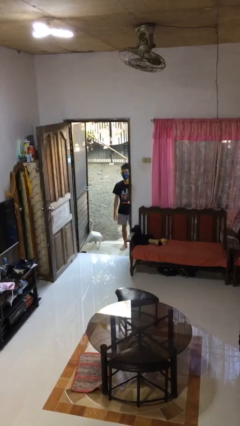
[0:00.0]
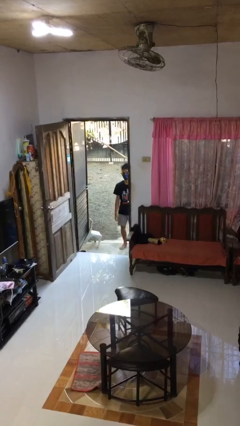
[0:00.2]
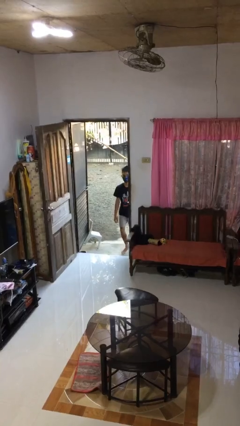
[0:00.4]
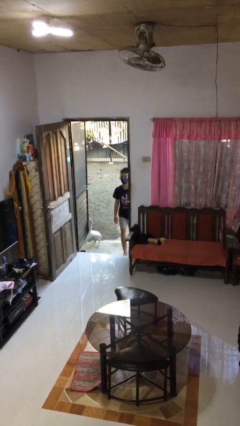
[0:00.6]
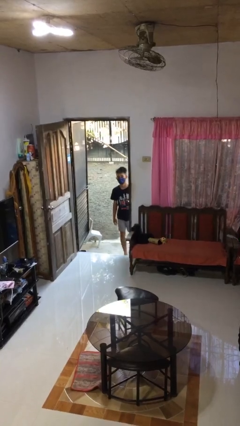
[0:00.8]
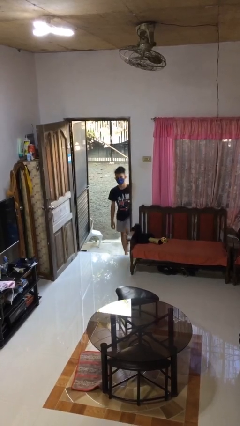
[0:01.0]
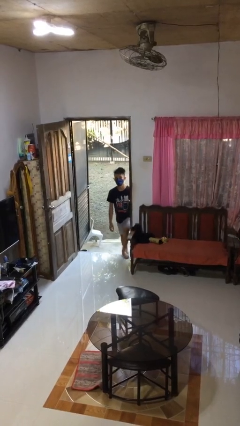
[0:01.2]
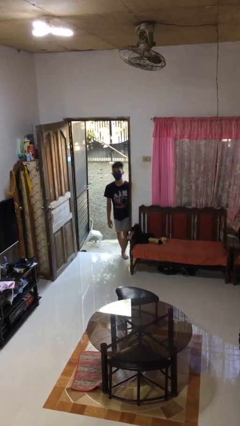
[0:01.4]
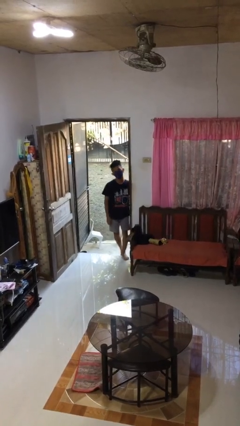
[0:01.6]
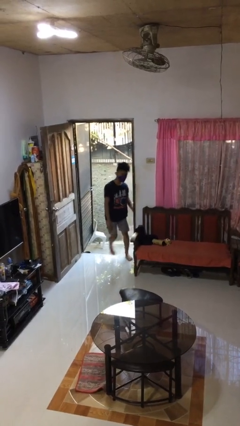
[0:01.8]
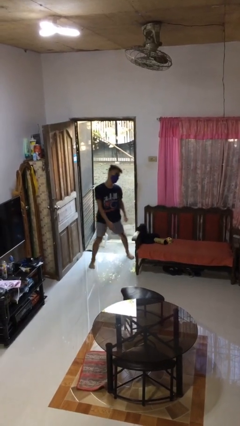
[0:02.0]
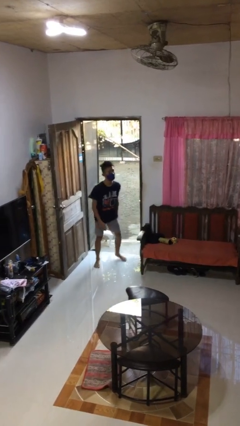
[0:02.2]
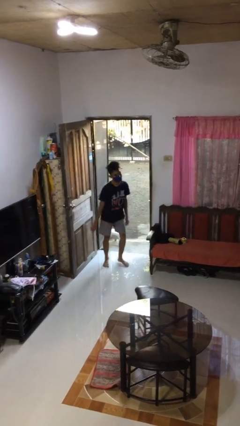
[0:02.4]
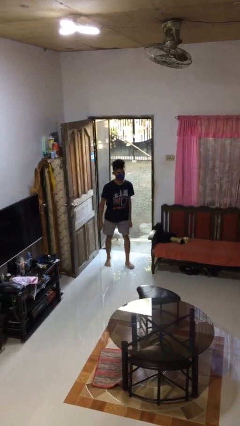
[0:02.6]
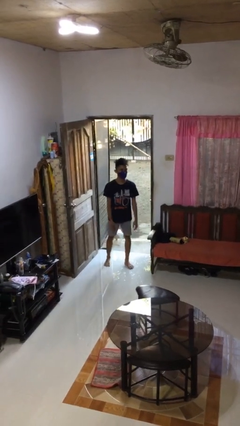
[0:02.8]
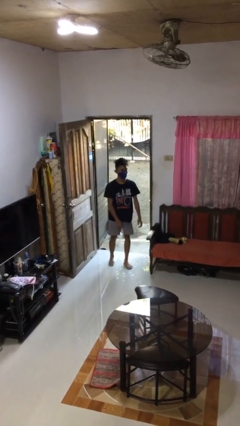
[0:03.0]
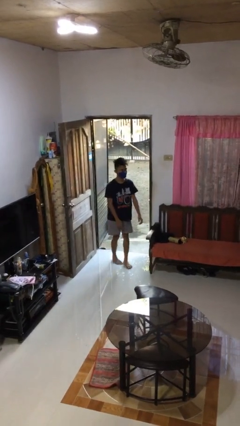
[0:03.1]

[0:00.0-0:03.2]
person bumps into wall

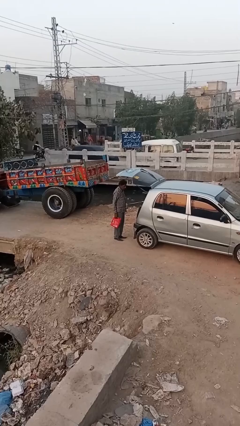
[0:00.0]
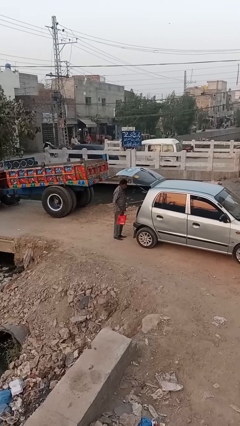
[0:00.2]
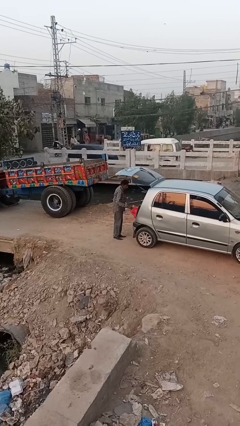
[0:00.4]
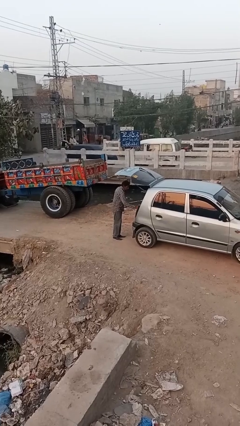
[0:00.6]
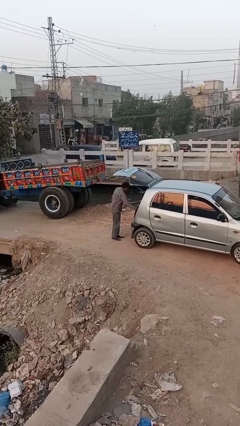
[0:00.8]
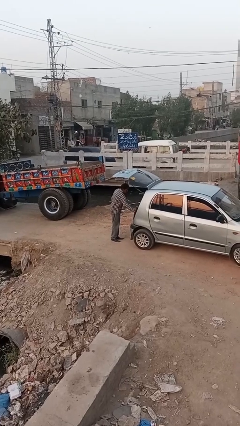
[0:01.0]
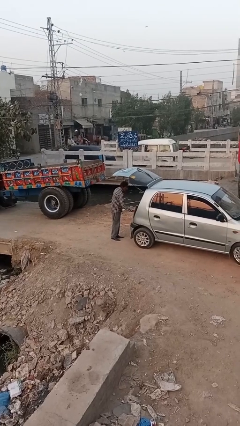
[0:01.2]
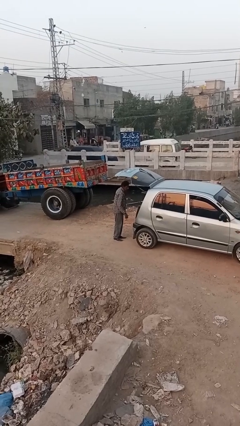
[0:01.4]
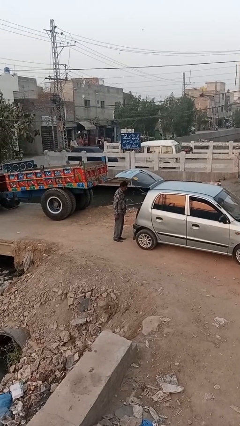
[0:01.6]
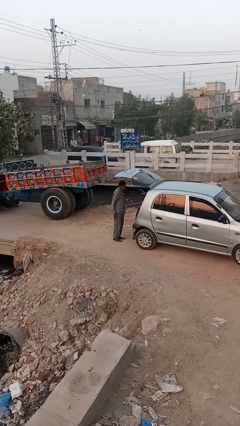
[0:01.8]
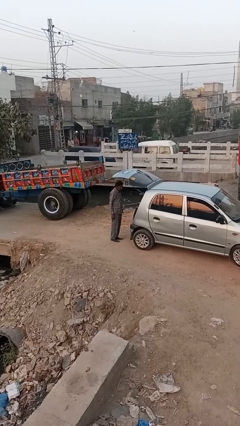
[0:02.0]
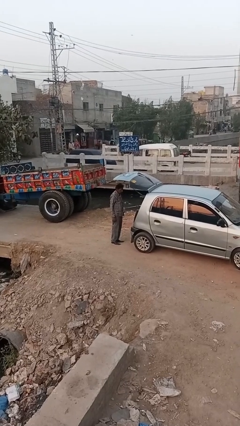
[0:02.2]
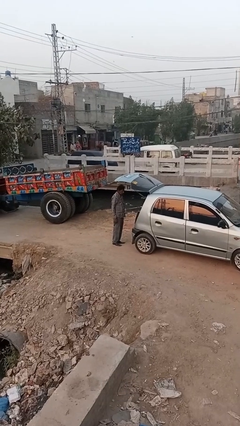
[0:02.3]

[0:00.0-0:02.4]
person loads car

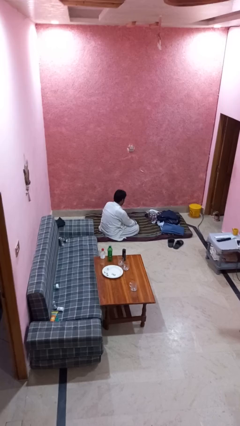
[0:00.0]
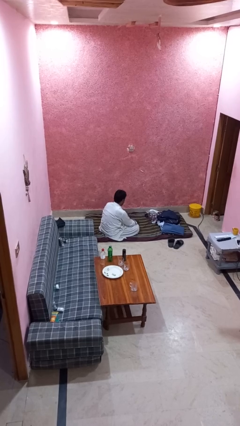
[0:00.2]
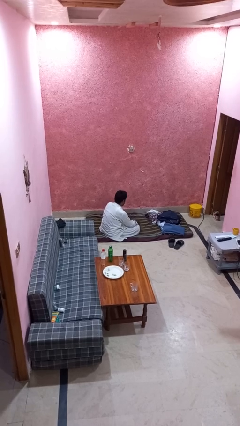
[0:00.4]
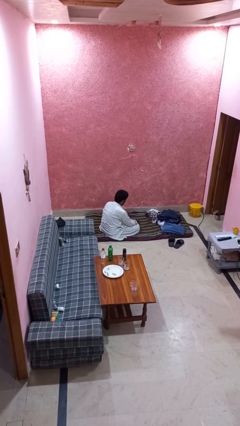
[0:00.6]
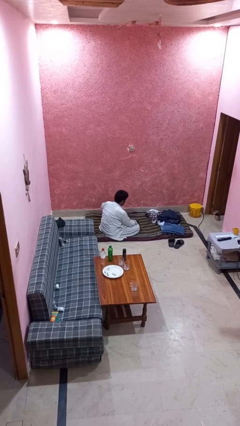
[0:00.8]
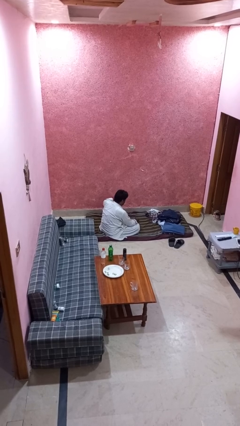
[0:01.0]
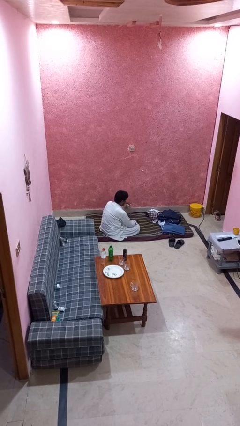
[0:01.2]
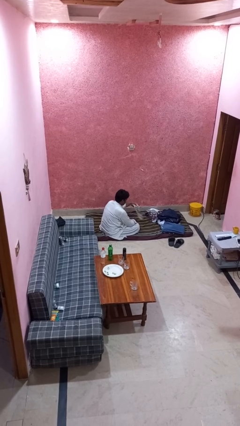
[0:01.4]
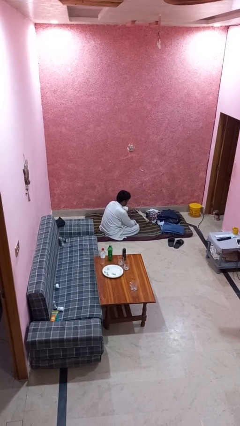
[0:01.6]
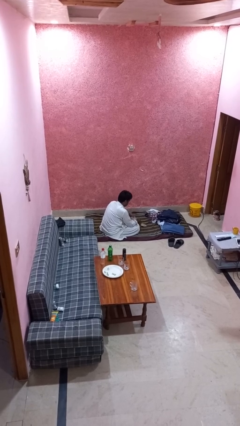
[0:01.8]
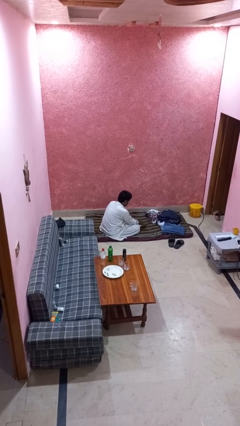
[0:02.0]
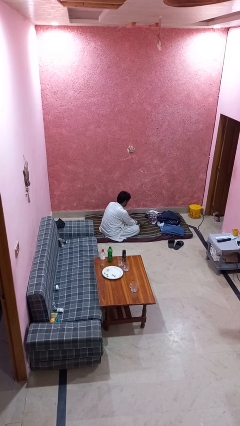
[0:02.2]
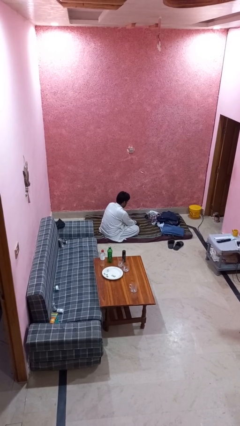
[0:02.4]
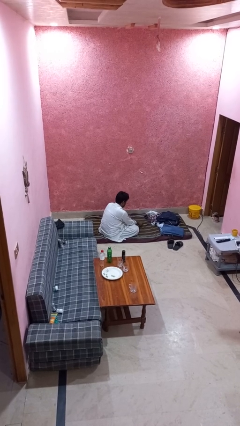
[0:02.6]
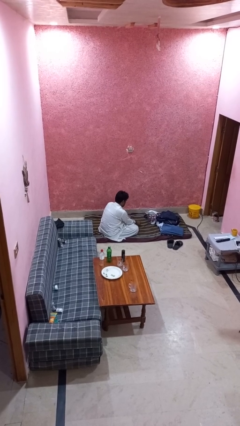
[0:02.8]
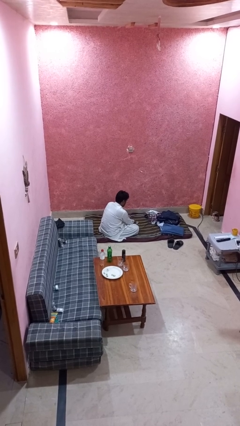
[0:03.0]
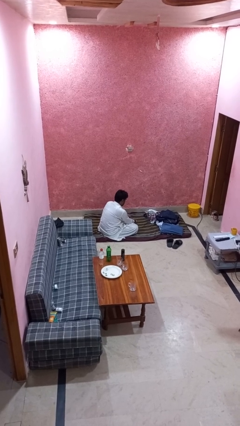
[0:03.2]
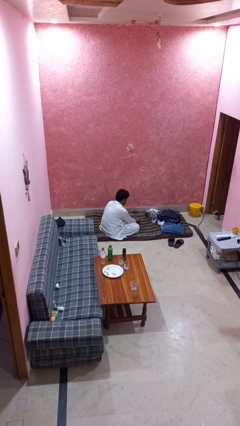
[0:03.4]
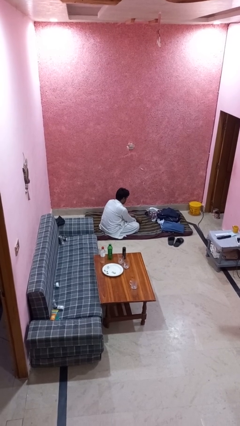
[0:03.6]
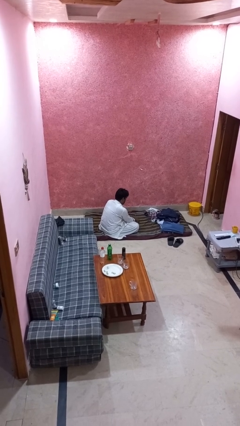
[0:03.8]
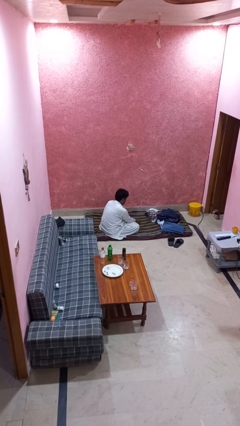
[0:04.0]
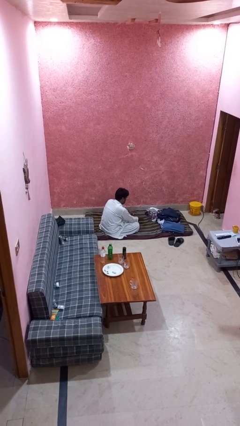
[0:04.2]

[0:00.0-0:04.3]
person folds socks

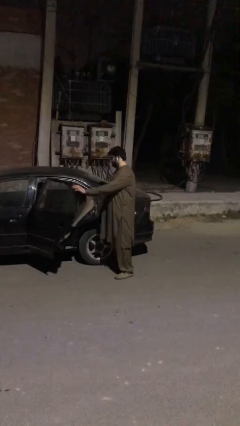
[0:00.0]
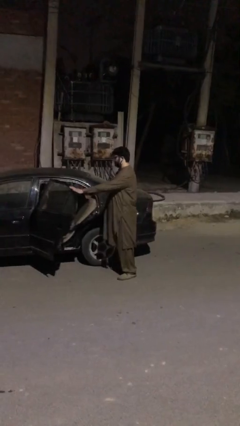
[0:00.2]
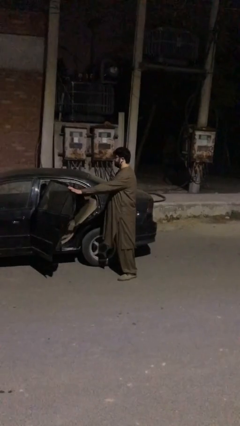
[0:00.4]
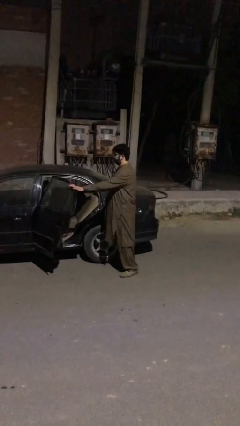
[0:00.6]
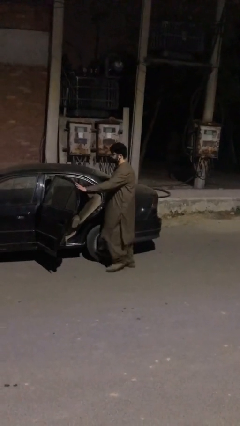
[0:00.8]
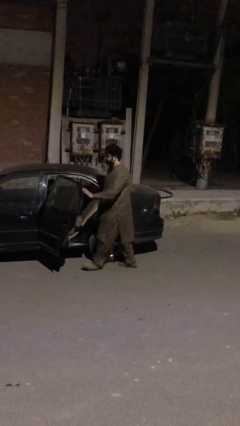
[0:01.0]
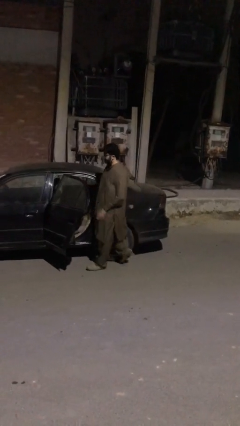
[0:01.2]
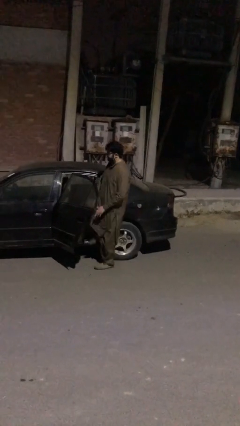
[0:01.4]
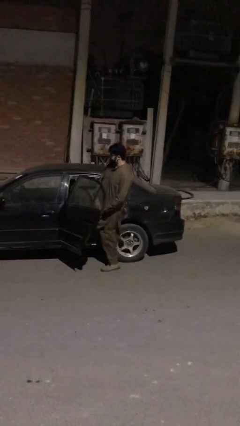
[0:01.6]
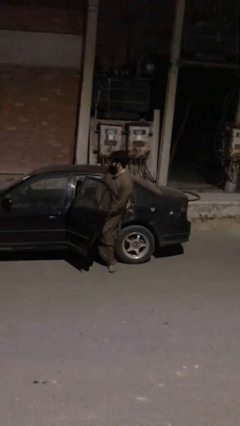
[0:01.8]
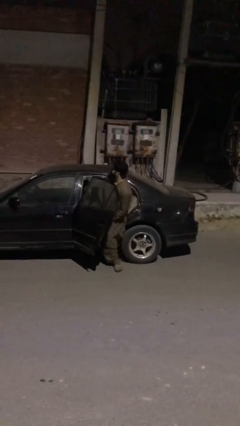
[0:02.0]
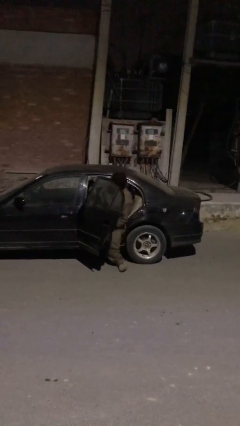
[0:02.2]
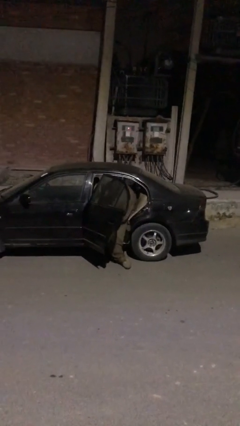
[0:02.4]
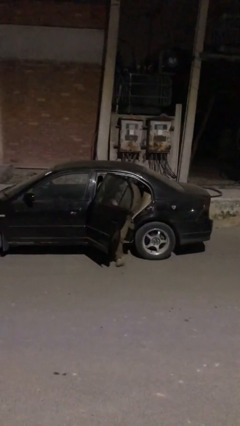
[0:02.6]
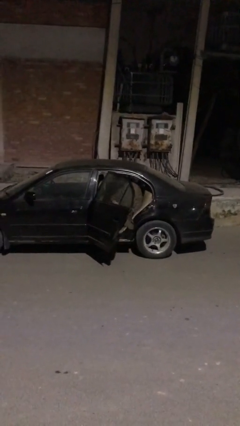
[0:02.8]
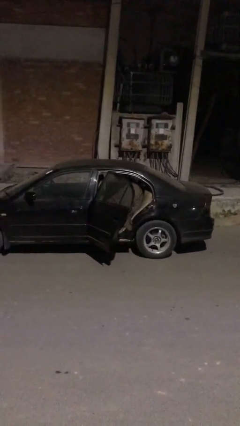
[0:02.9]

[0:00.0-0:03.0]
person enters car

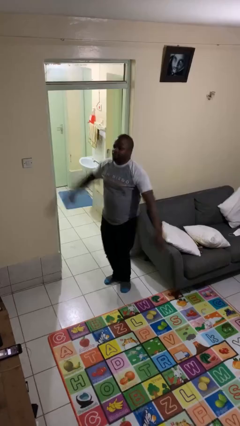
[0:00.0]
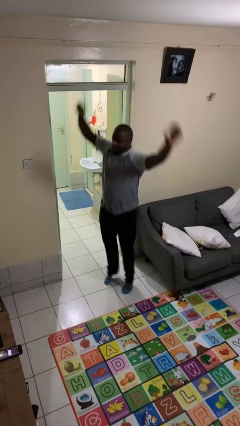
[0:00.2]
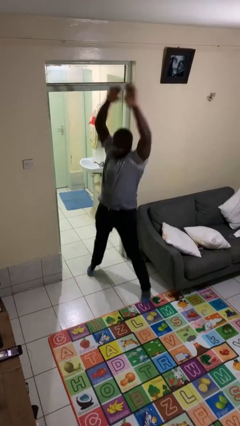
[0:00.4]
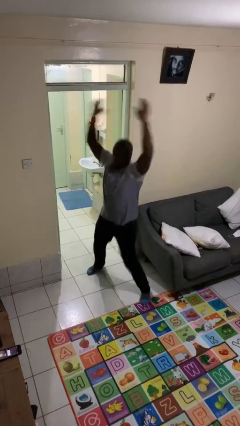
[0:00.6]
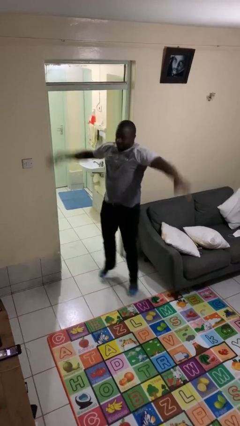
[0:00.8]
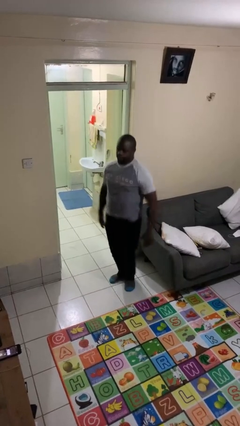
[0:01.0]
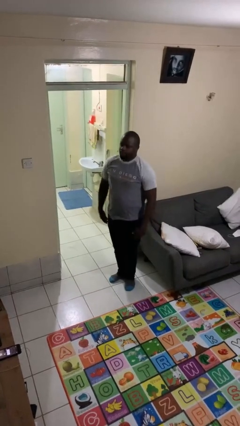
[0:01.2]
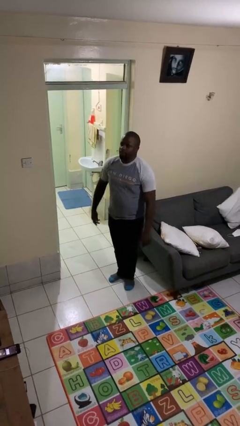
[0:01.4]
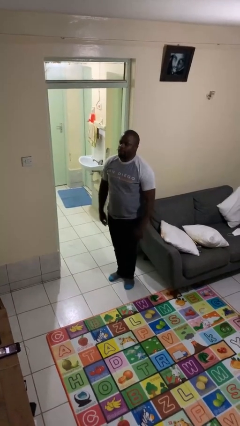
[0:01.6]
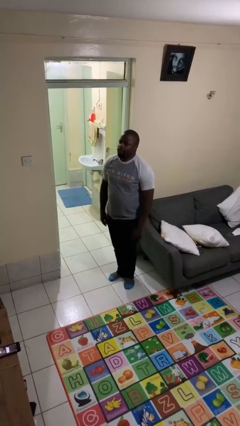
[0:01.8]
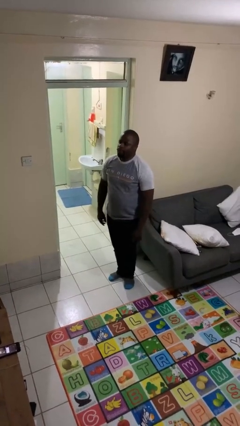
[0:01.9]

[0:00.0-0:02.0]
person exercises with jumping jacks

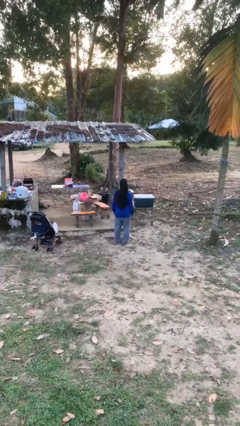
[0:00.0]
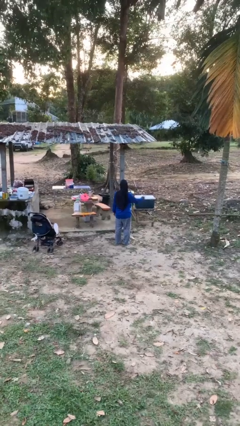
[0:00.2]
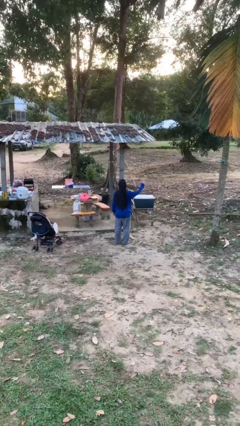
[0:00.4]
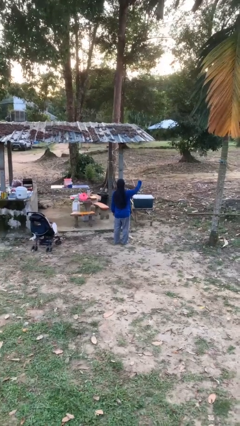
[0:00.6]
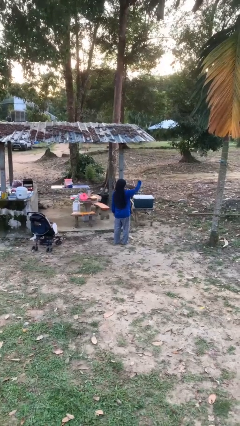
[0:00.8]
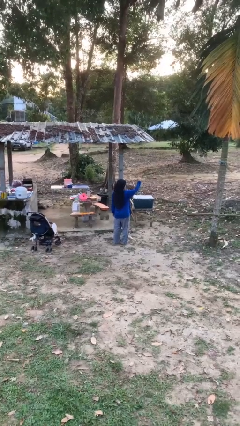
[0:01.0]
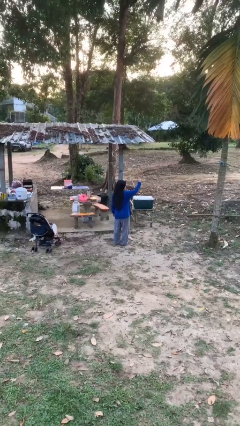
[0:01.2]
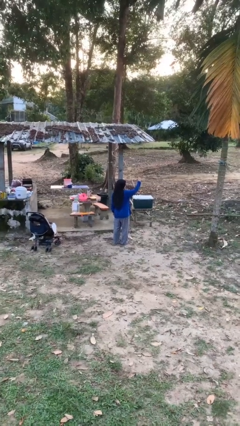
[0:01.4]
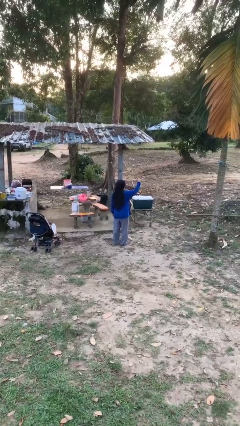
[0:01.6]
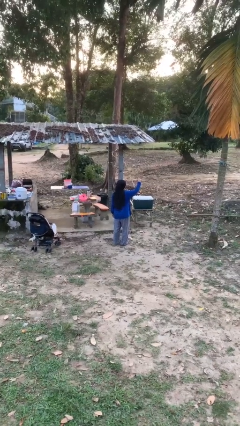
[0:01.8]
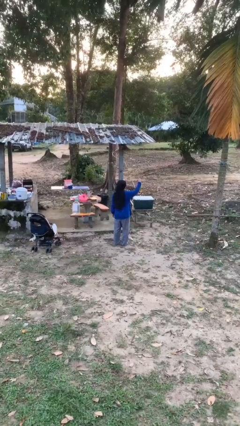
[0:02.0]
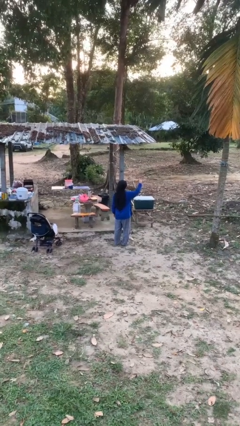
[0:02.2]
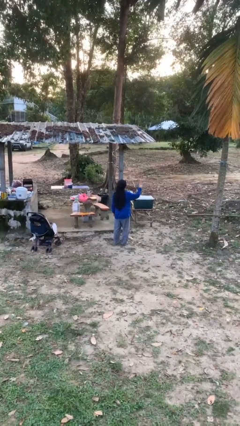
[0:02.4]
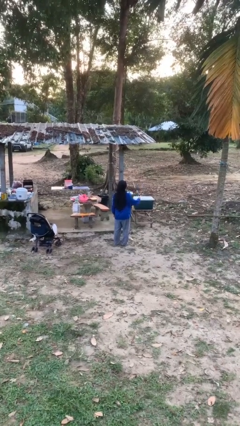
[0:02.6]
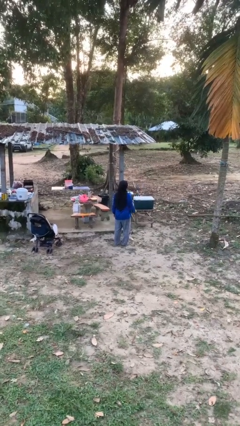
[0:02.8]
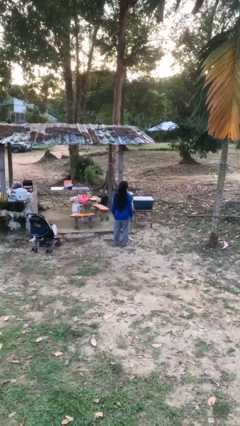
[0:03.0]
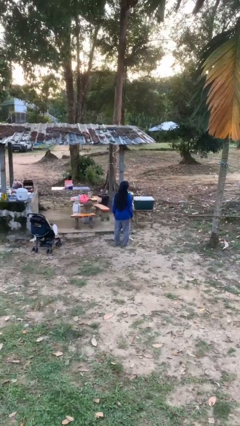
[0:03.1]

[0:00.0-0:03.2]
person gestures number three
